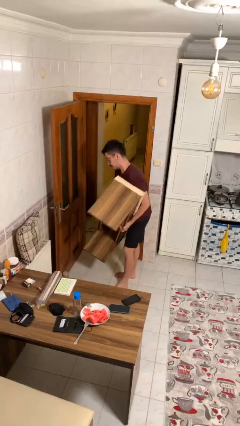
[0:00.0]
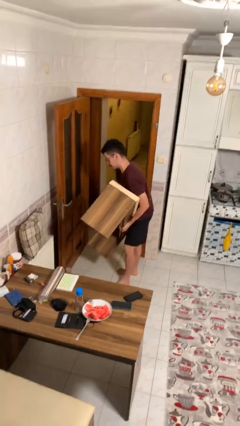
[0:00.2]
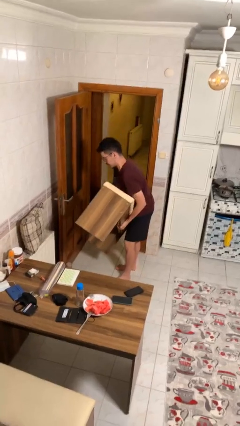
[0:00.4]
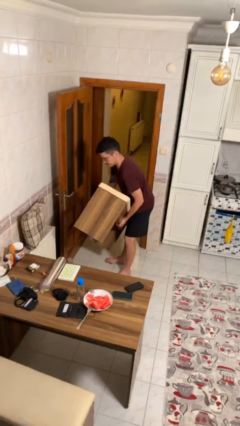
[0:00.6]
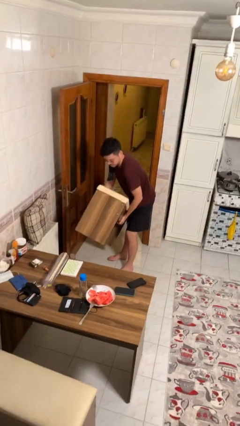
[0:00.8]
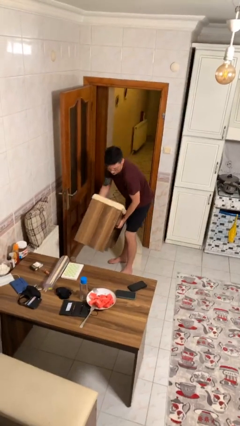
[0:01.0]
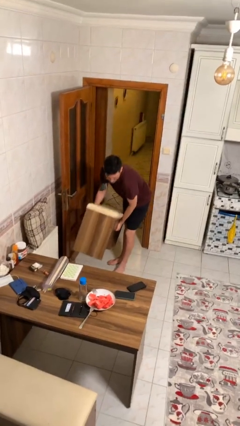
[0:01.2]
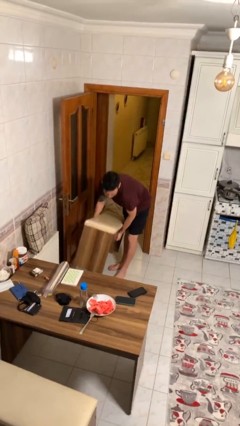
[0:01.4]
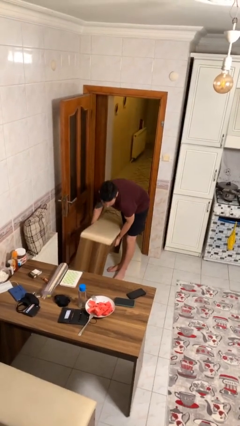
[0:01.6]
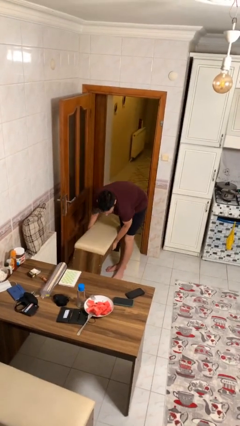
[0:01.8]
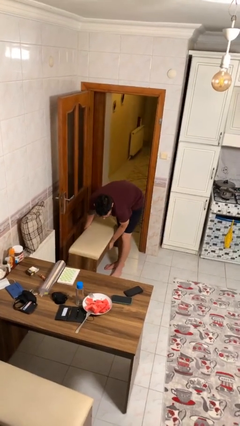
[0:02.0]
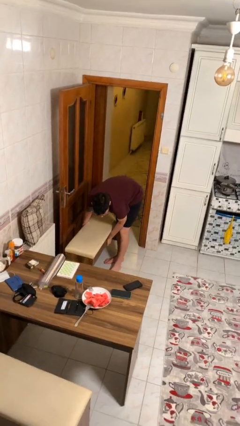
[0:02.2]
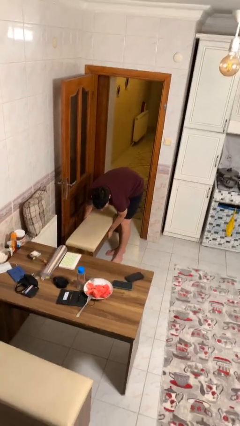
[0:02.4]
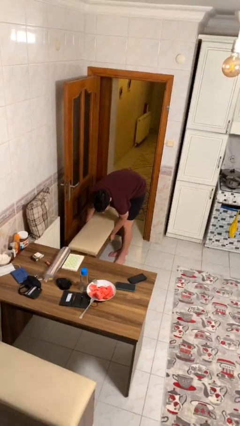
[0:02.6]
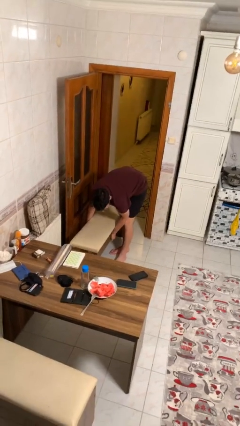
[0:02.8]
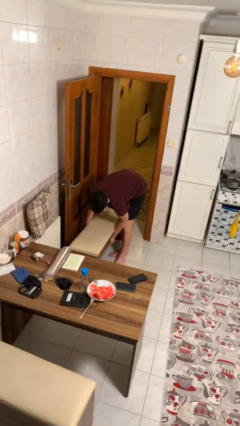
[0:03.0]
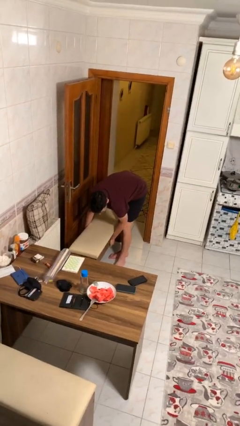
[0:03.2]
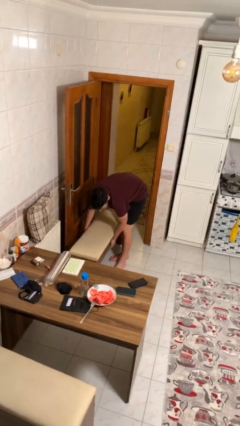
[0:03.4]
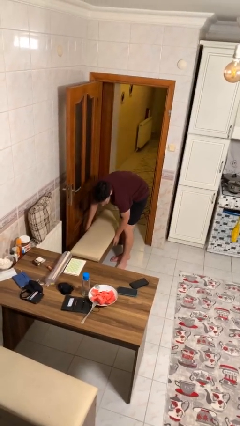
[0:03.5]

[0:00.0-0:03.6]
person puts down object on floor

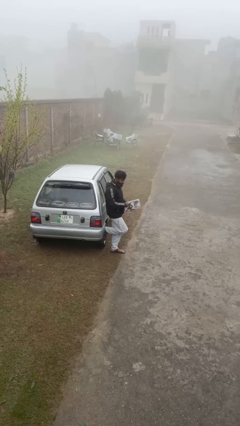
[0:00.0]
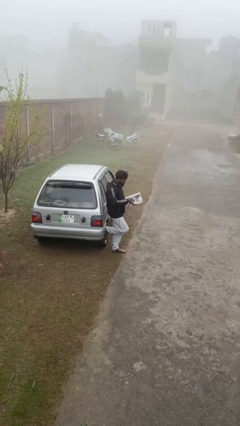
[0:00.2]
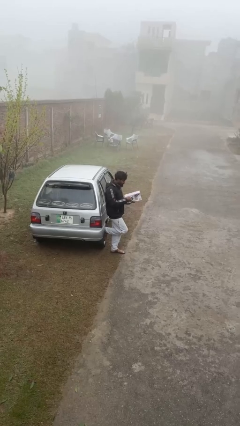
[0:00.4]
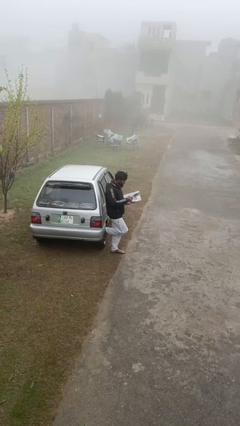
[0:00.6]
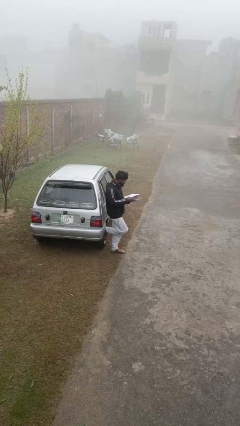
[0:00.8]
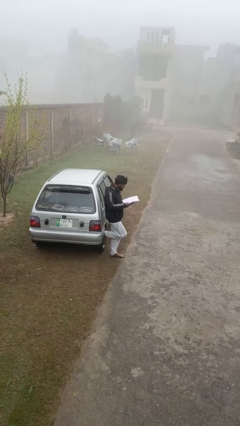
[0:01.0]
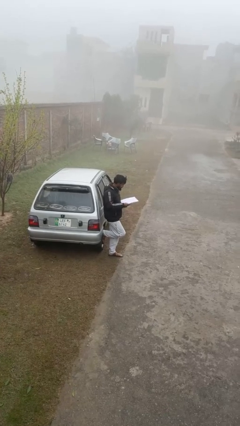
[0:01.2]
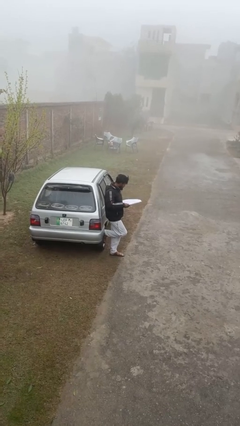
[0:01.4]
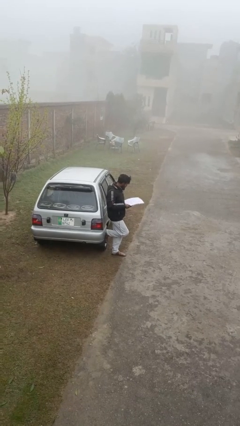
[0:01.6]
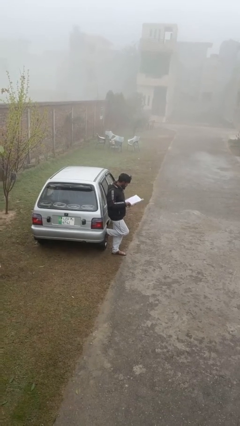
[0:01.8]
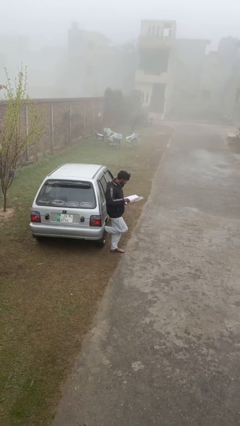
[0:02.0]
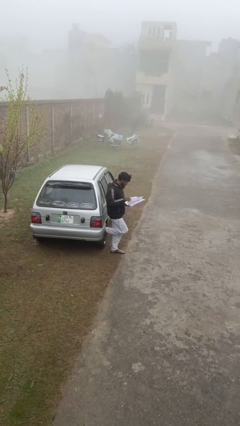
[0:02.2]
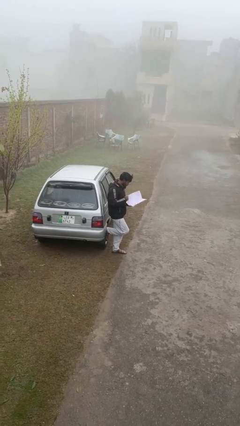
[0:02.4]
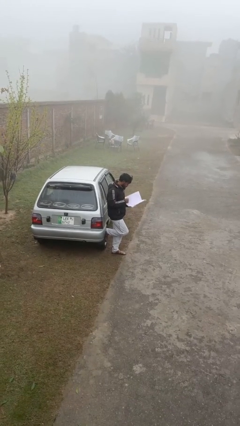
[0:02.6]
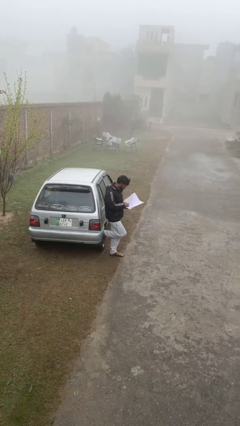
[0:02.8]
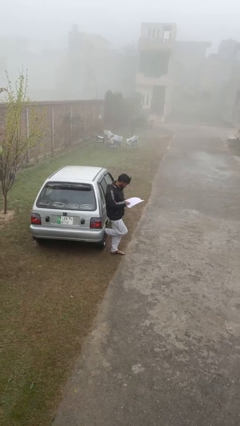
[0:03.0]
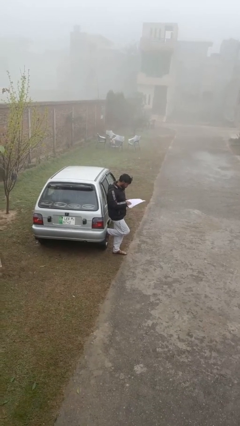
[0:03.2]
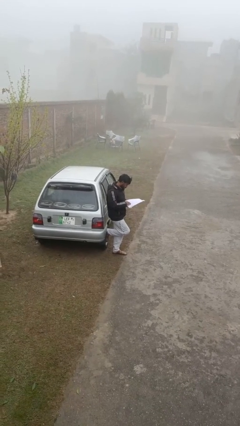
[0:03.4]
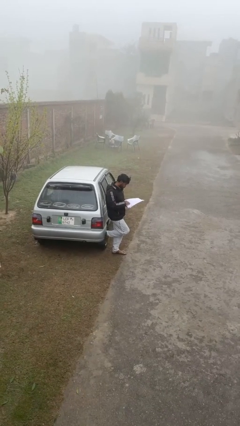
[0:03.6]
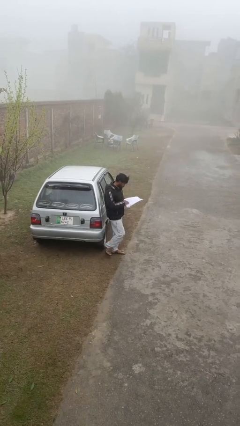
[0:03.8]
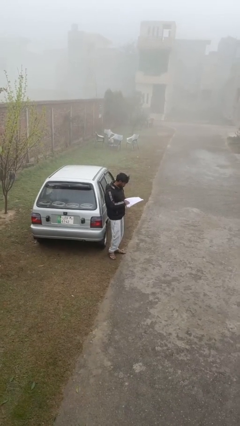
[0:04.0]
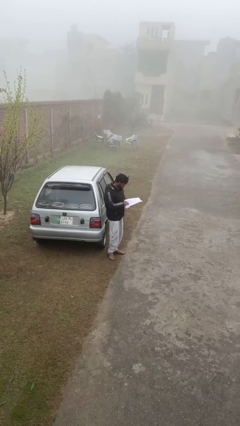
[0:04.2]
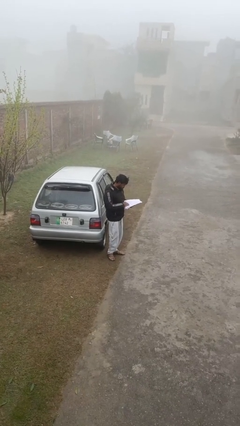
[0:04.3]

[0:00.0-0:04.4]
person reads document

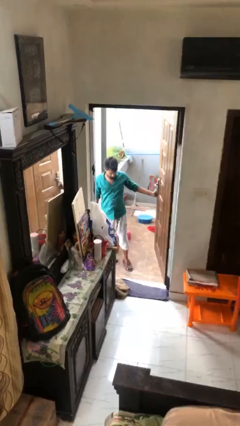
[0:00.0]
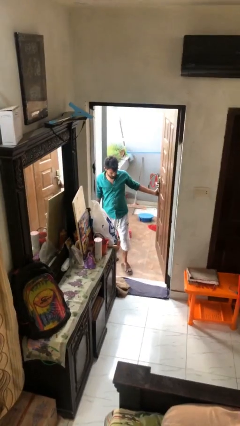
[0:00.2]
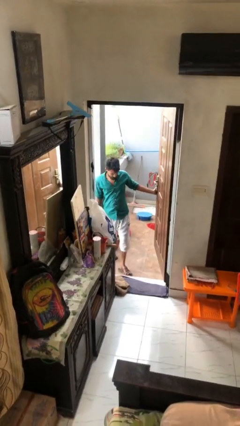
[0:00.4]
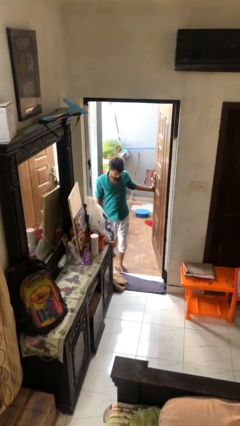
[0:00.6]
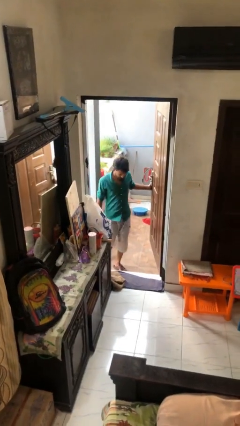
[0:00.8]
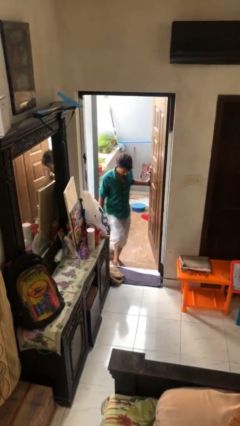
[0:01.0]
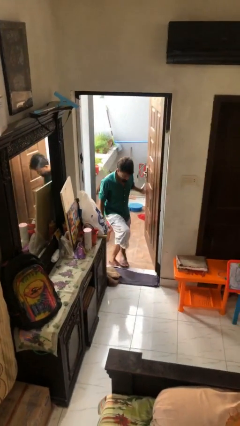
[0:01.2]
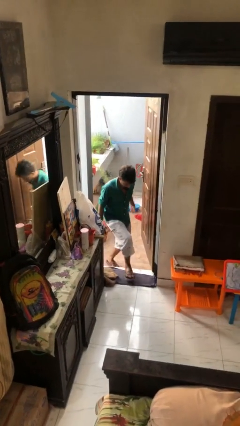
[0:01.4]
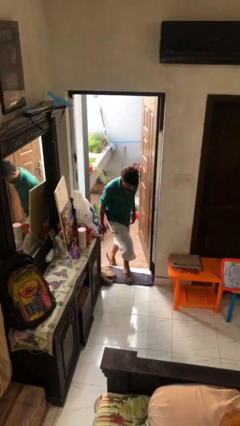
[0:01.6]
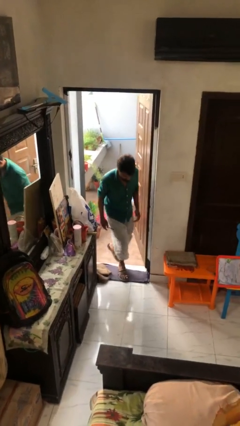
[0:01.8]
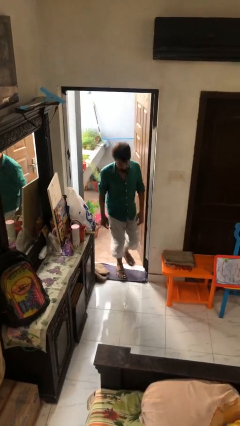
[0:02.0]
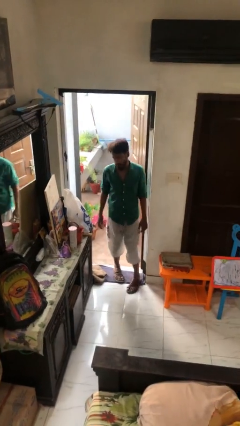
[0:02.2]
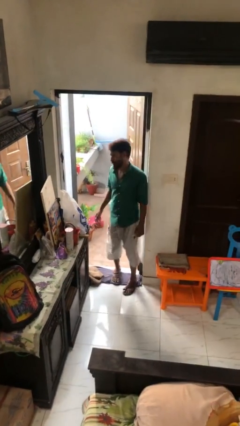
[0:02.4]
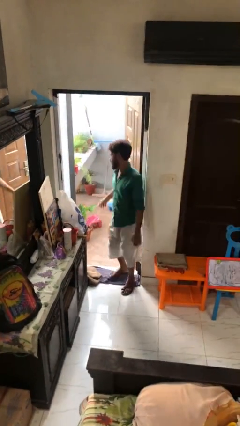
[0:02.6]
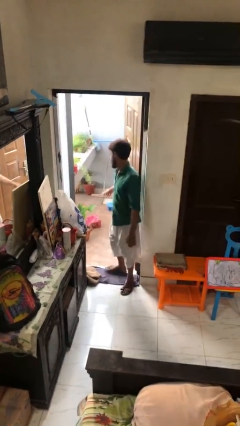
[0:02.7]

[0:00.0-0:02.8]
person enters scene through structure

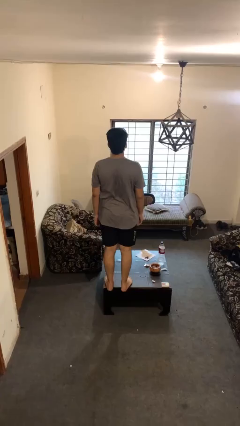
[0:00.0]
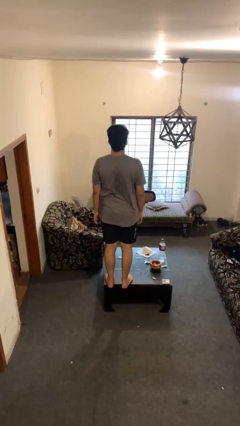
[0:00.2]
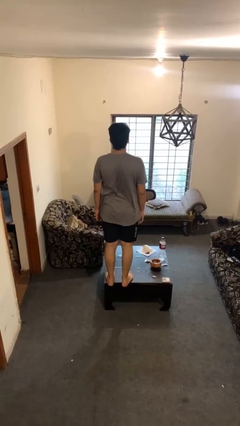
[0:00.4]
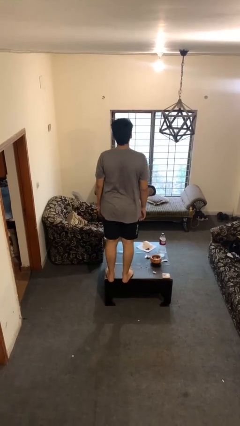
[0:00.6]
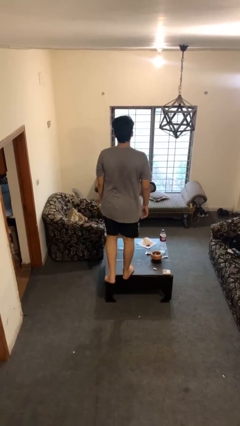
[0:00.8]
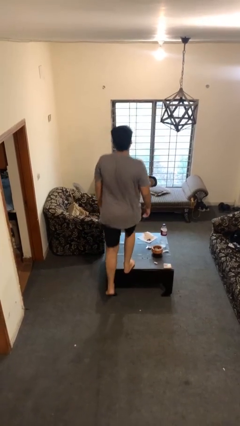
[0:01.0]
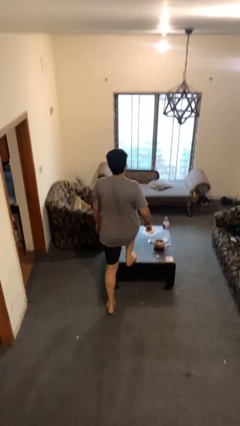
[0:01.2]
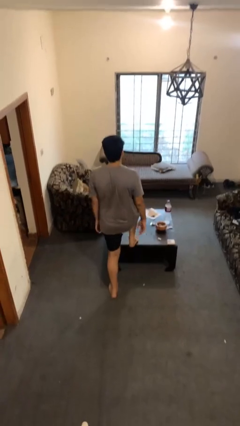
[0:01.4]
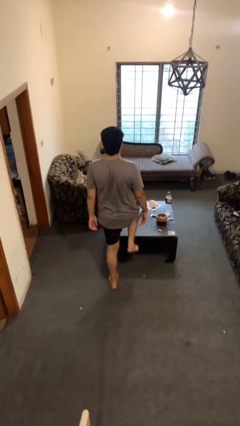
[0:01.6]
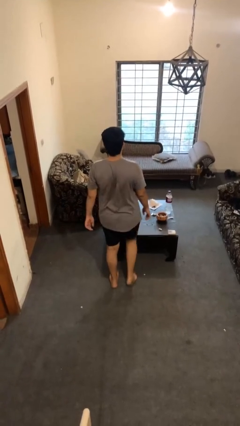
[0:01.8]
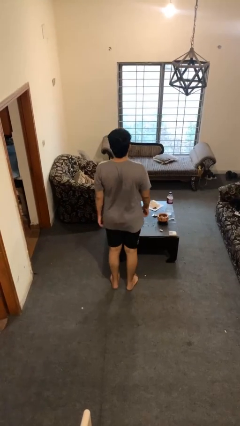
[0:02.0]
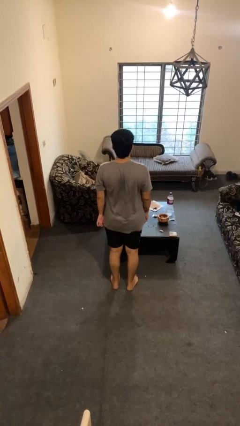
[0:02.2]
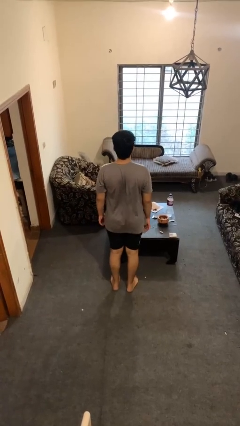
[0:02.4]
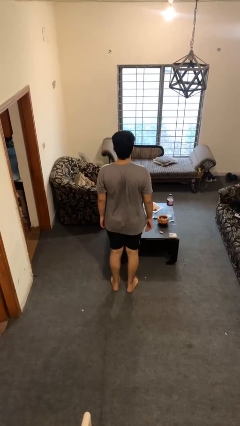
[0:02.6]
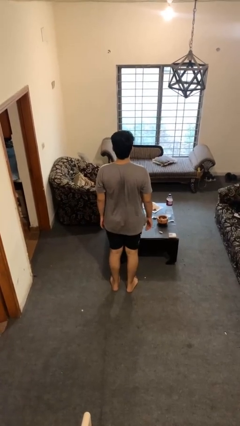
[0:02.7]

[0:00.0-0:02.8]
person climbs off table

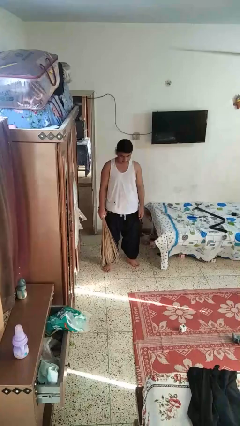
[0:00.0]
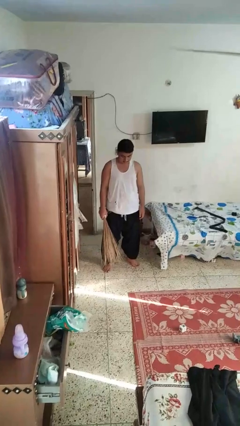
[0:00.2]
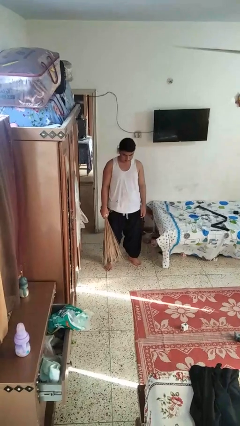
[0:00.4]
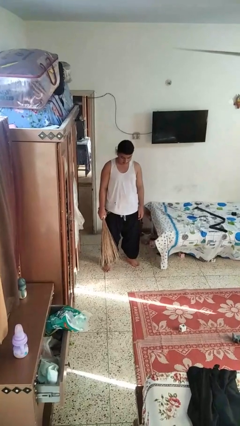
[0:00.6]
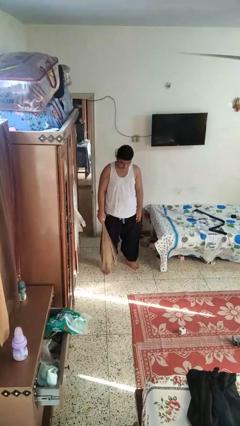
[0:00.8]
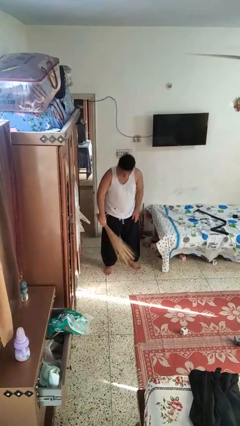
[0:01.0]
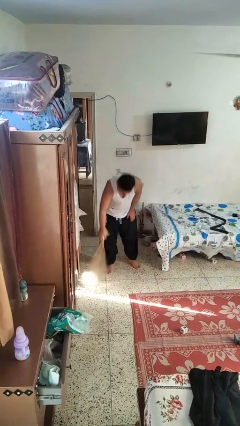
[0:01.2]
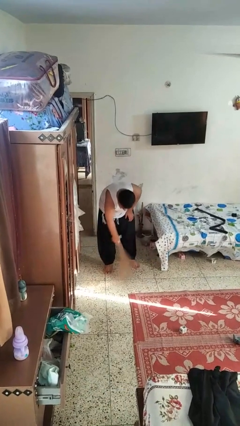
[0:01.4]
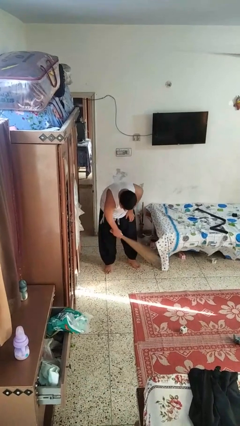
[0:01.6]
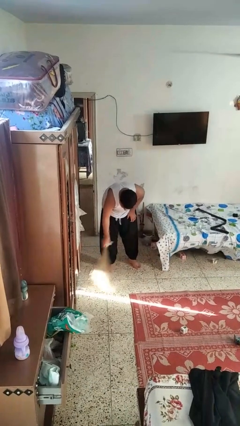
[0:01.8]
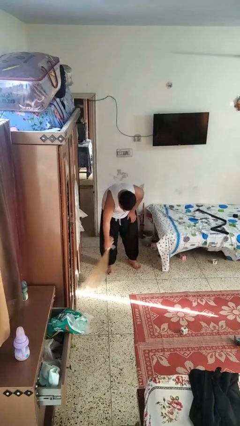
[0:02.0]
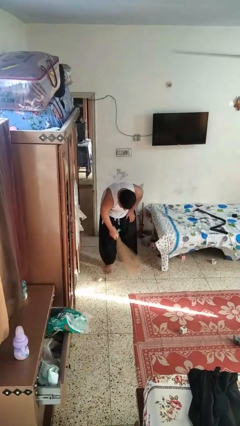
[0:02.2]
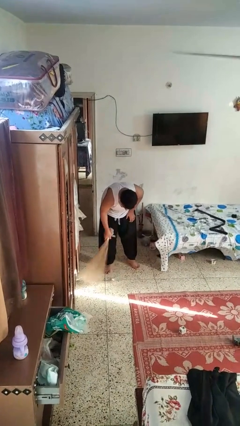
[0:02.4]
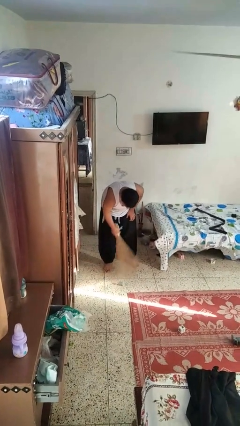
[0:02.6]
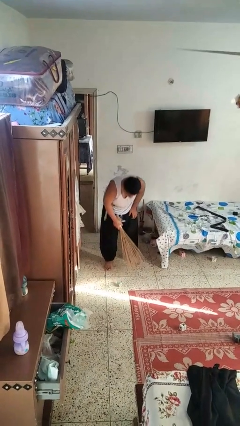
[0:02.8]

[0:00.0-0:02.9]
person sweeps floor

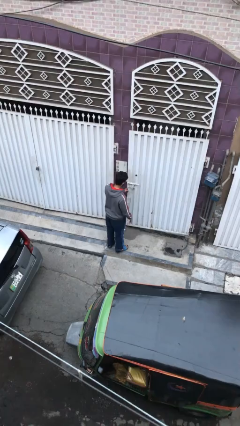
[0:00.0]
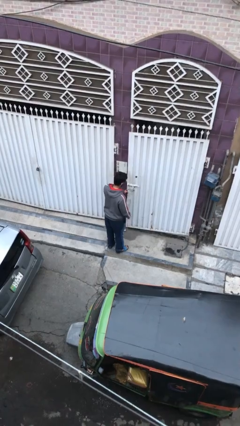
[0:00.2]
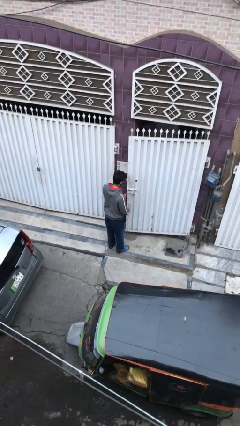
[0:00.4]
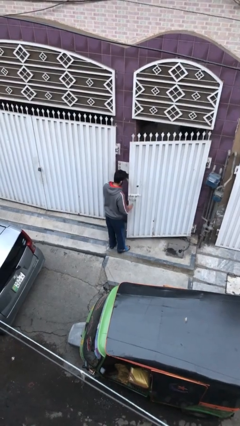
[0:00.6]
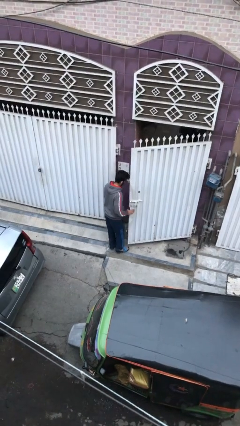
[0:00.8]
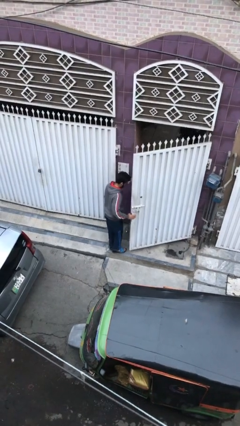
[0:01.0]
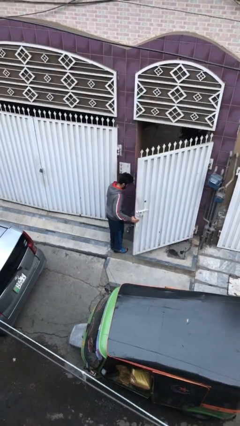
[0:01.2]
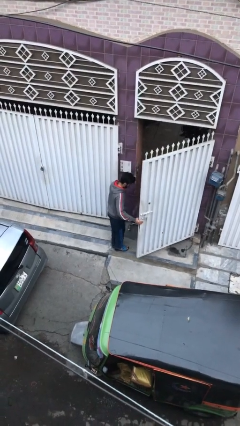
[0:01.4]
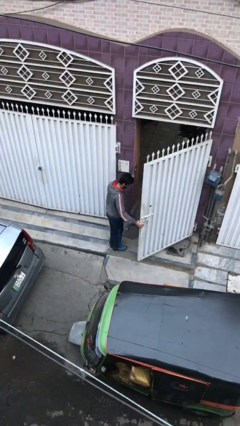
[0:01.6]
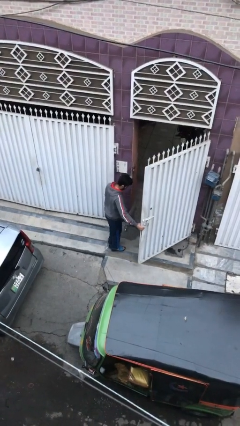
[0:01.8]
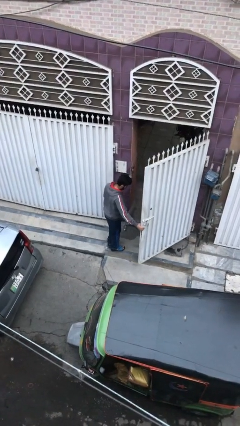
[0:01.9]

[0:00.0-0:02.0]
person opens facility door
